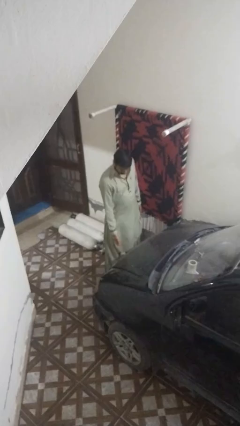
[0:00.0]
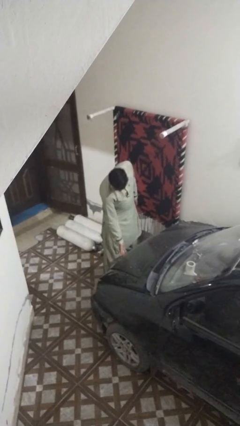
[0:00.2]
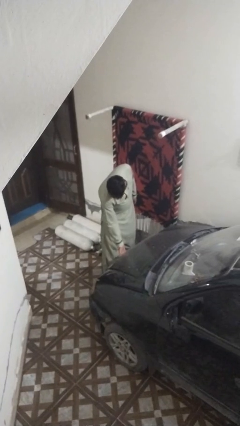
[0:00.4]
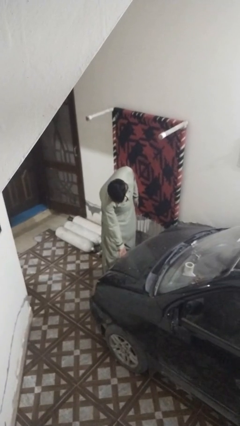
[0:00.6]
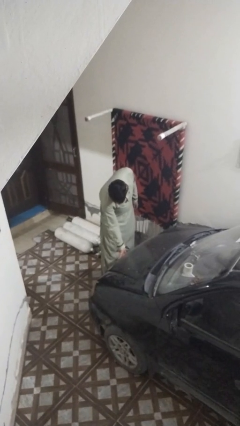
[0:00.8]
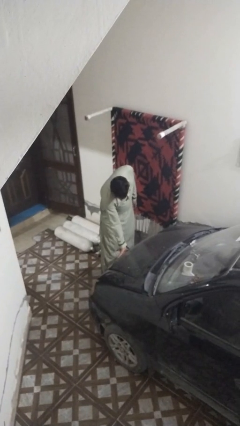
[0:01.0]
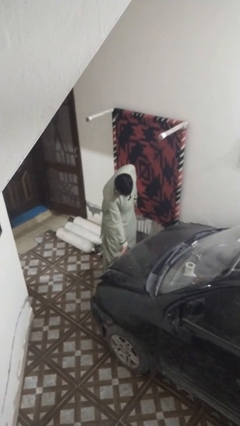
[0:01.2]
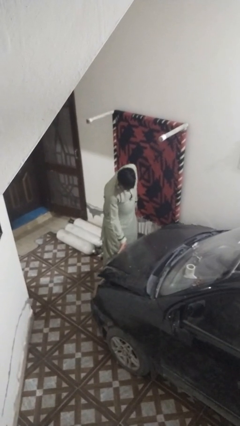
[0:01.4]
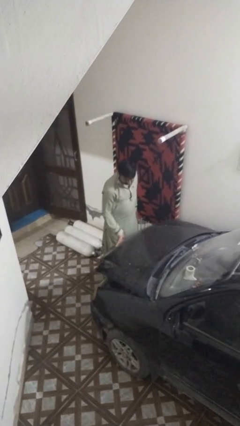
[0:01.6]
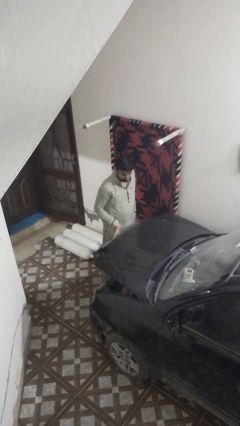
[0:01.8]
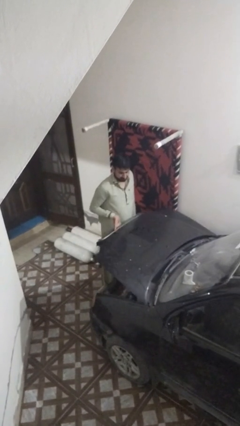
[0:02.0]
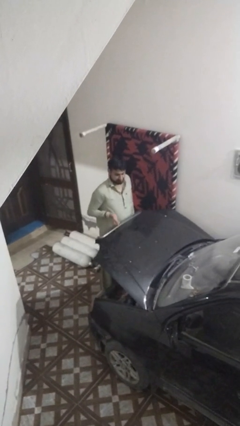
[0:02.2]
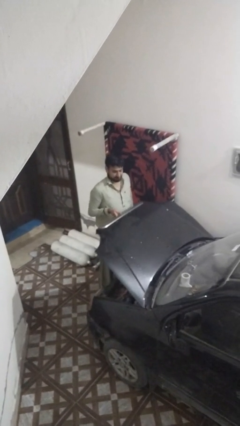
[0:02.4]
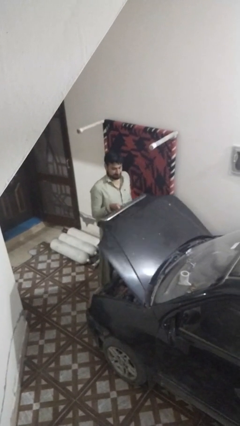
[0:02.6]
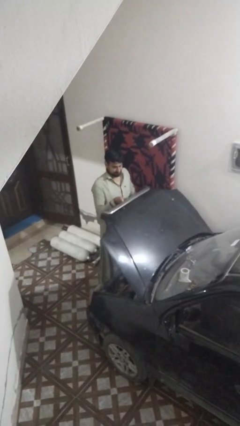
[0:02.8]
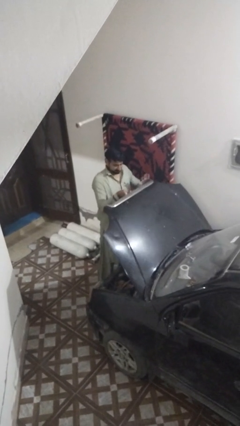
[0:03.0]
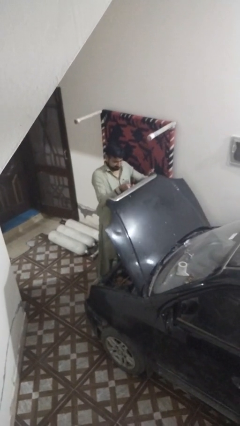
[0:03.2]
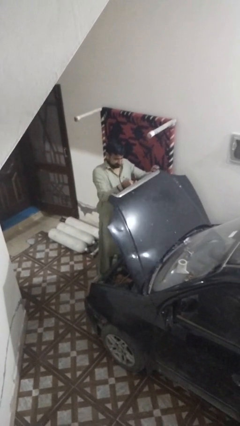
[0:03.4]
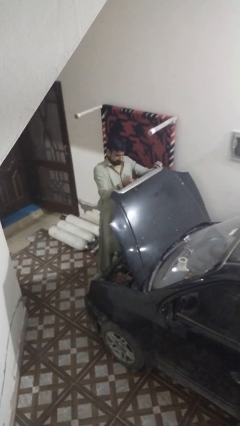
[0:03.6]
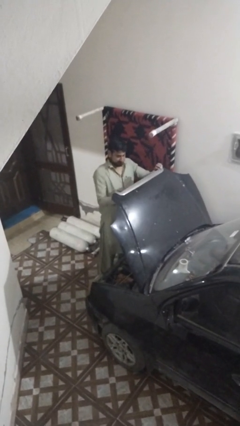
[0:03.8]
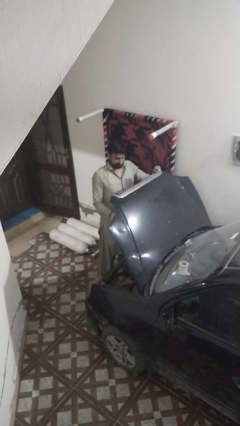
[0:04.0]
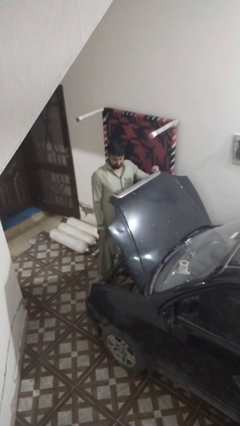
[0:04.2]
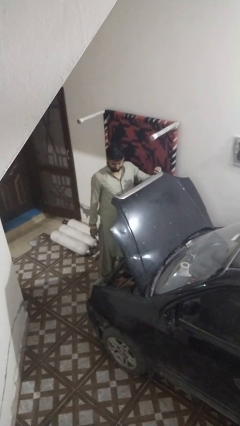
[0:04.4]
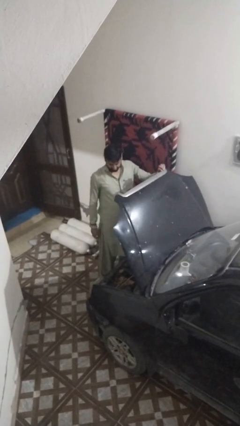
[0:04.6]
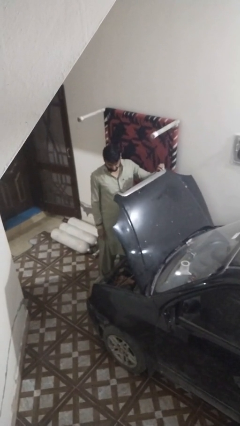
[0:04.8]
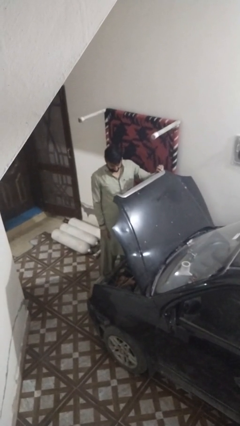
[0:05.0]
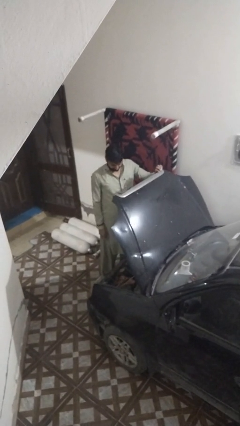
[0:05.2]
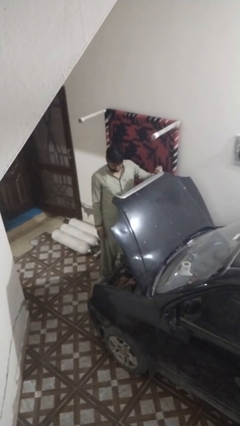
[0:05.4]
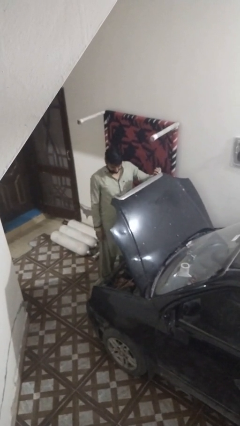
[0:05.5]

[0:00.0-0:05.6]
person opens car hood

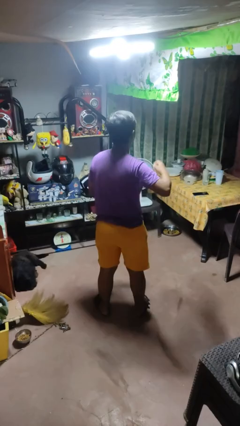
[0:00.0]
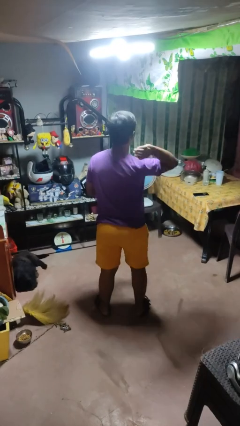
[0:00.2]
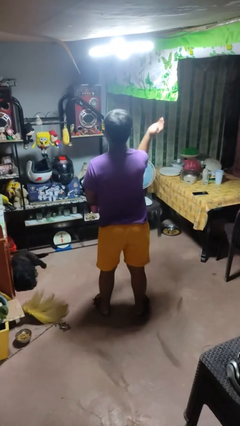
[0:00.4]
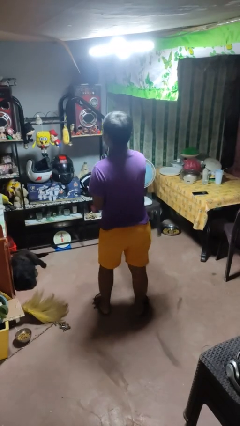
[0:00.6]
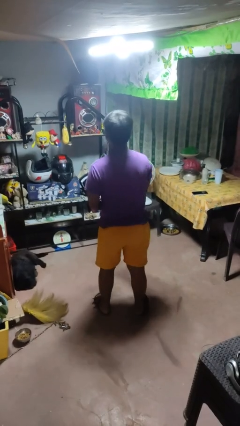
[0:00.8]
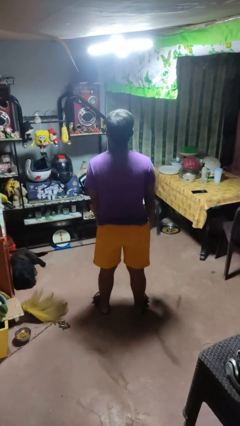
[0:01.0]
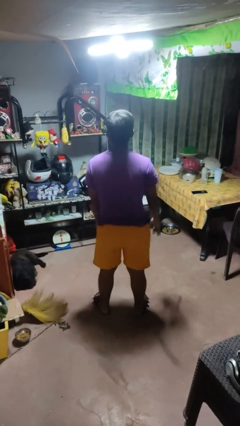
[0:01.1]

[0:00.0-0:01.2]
person karate chop

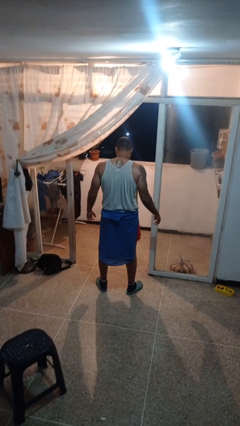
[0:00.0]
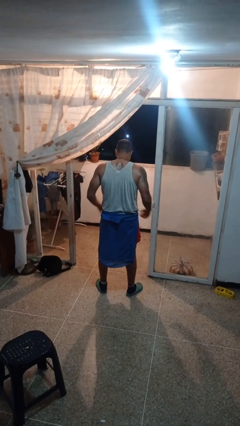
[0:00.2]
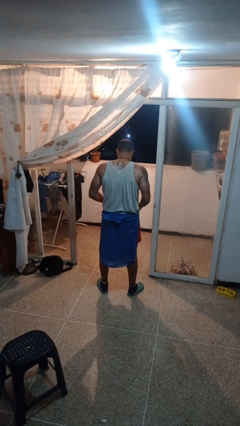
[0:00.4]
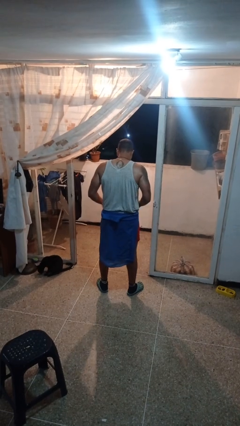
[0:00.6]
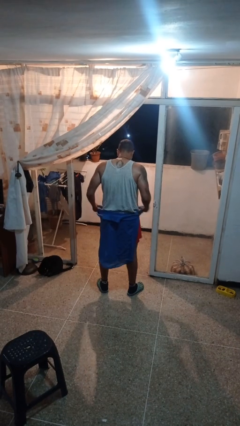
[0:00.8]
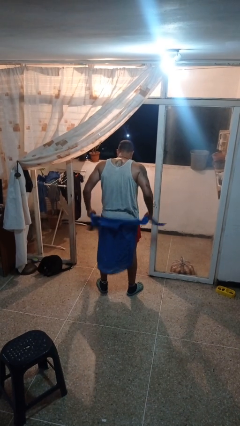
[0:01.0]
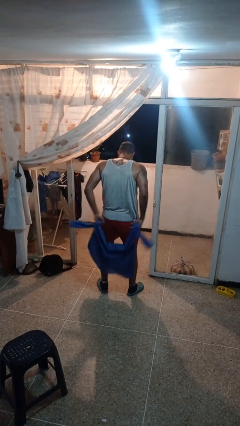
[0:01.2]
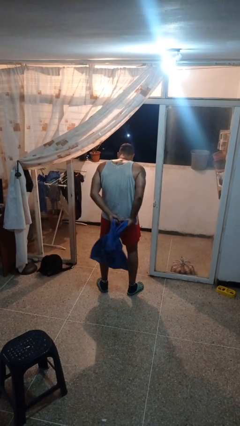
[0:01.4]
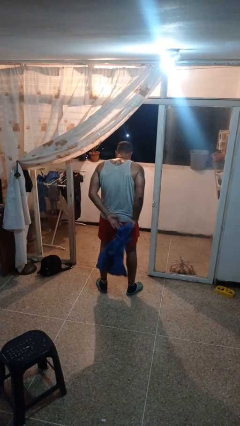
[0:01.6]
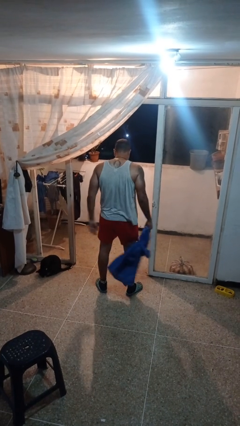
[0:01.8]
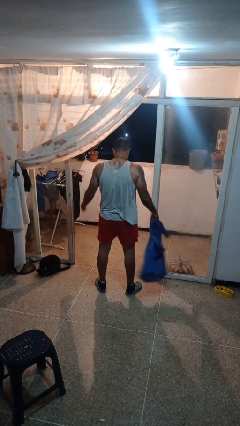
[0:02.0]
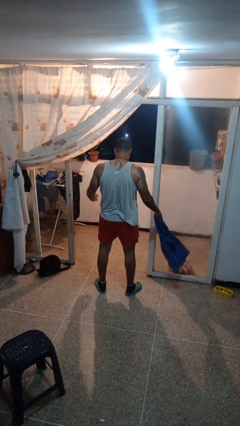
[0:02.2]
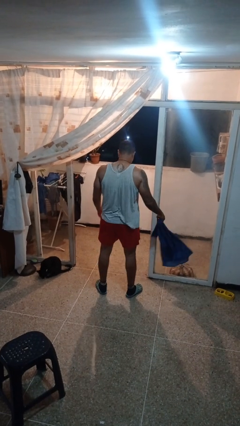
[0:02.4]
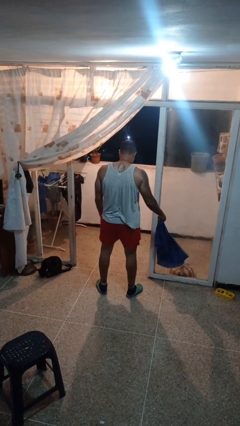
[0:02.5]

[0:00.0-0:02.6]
person unties jacket around waist

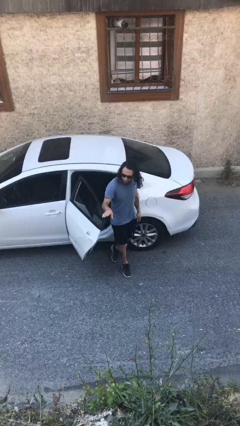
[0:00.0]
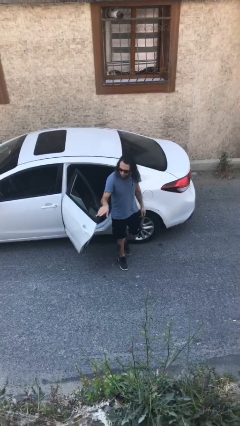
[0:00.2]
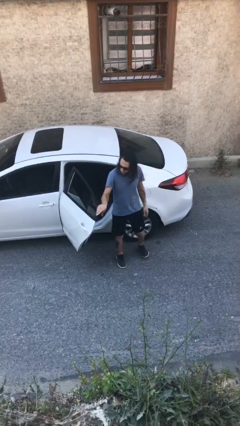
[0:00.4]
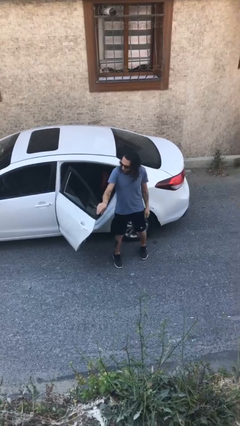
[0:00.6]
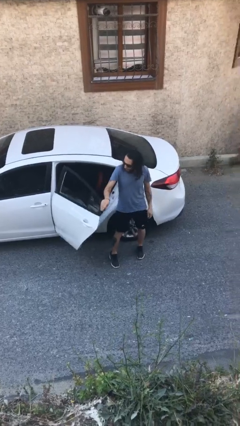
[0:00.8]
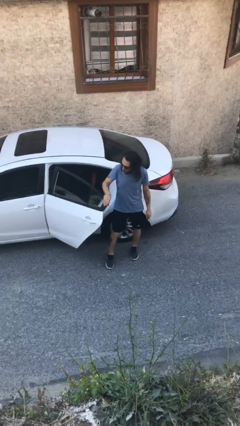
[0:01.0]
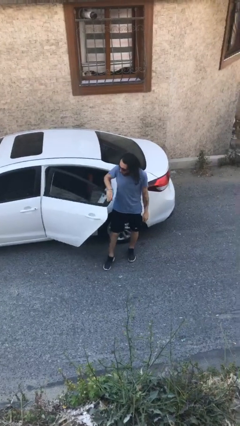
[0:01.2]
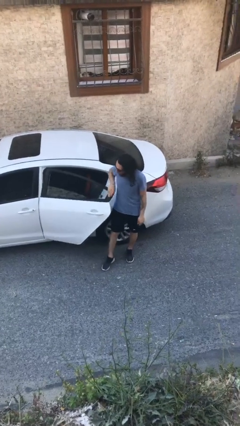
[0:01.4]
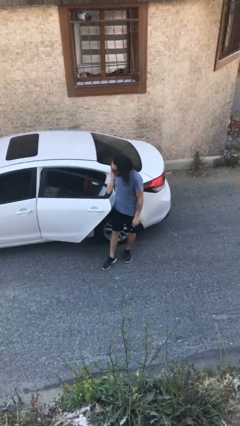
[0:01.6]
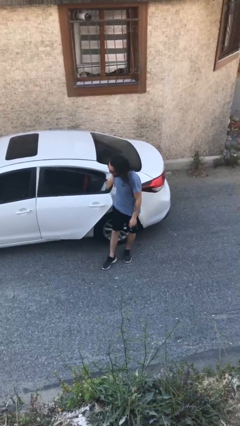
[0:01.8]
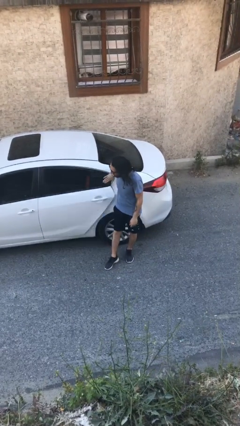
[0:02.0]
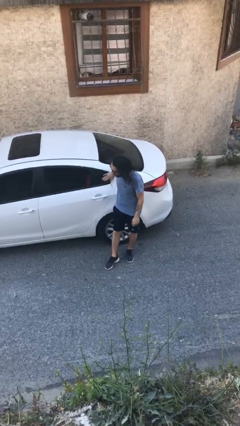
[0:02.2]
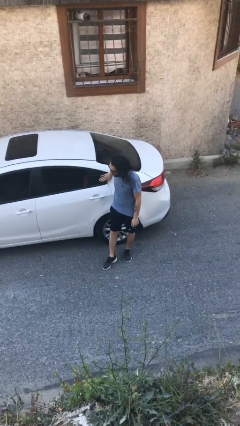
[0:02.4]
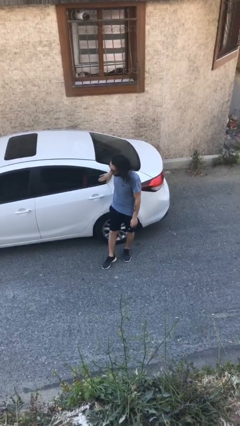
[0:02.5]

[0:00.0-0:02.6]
person closes car door

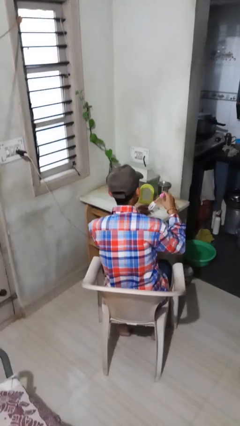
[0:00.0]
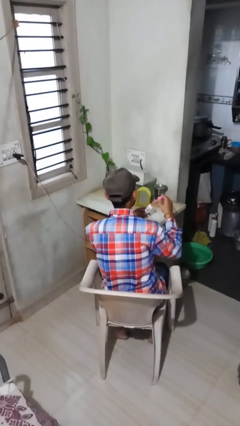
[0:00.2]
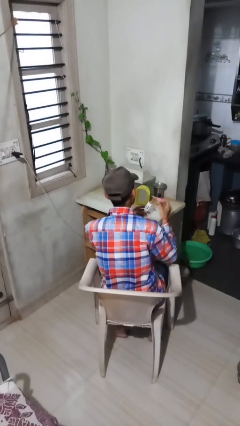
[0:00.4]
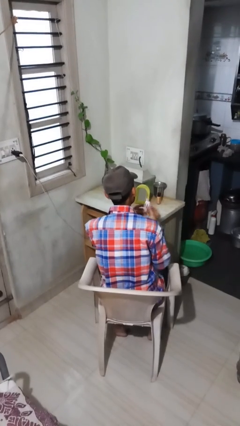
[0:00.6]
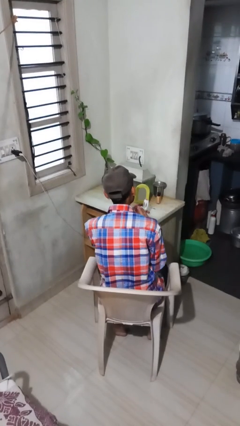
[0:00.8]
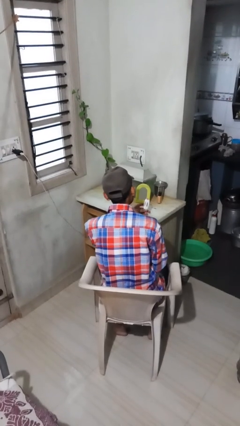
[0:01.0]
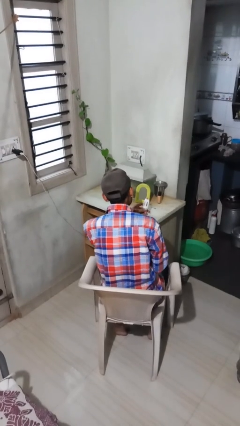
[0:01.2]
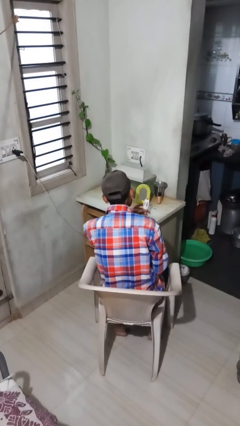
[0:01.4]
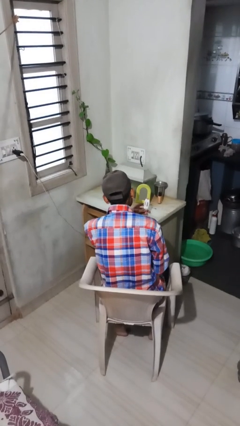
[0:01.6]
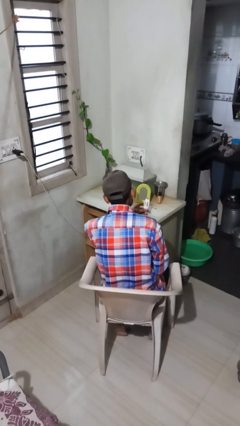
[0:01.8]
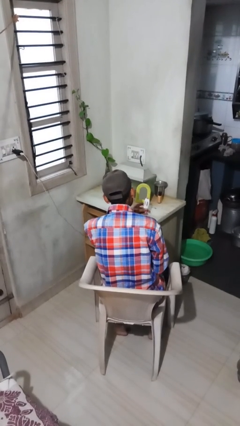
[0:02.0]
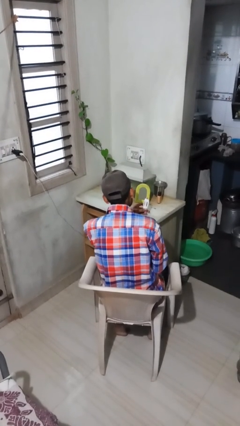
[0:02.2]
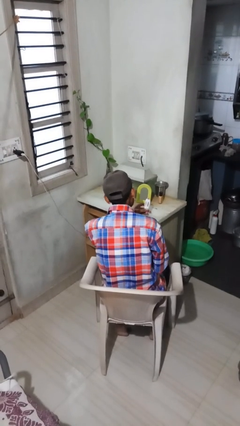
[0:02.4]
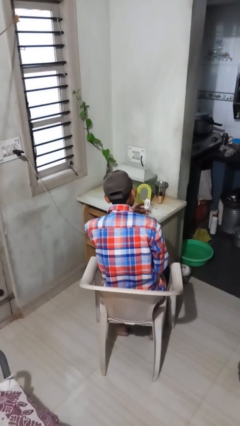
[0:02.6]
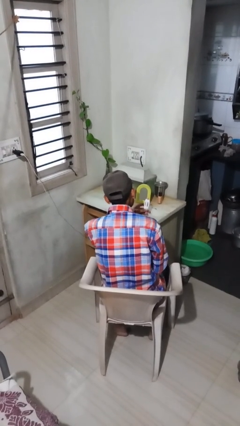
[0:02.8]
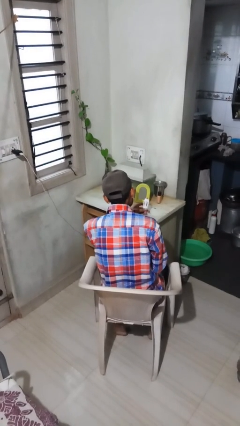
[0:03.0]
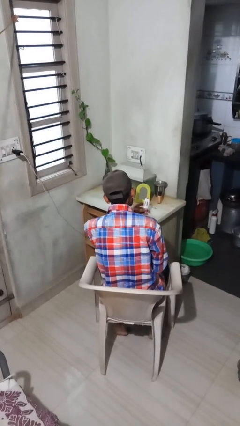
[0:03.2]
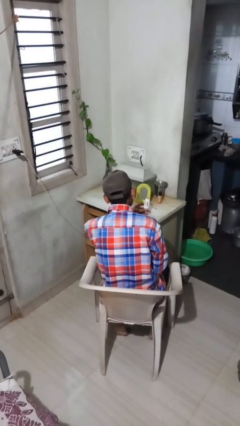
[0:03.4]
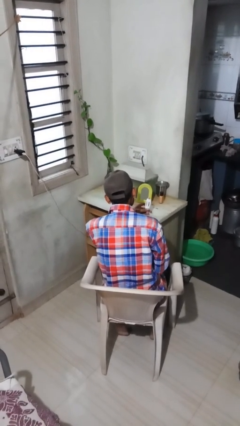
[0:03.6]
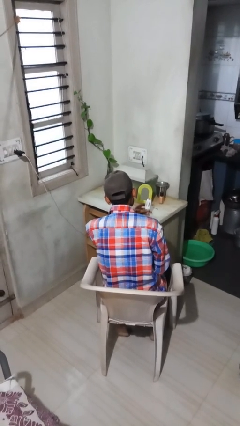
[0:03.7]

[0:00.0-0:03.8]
person applies lip makeup

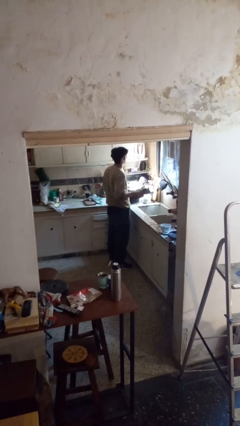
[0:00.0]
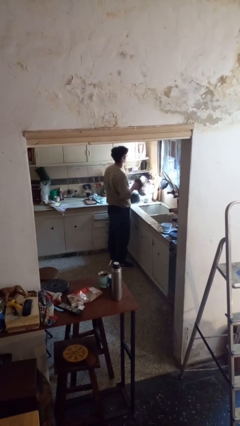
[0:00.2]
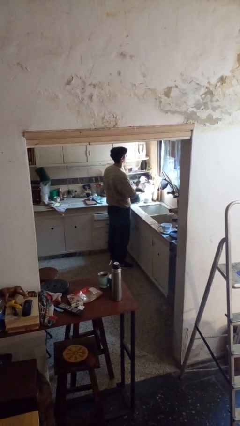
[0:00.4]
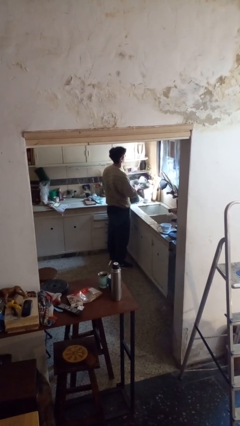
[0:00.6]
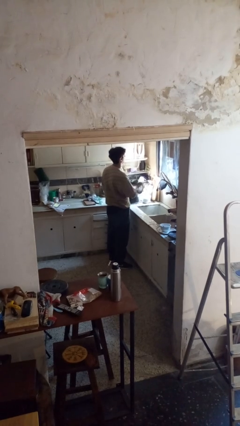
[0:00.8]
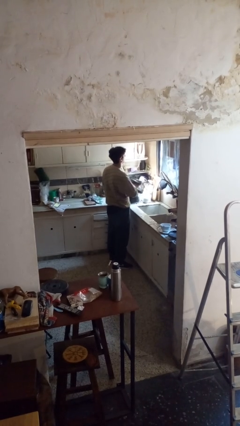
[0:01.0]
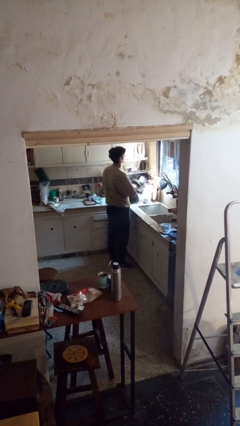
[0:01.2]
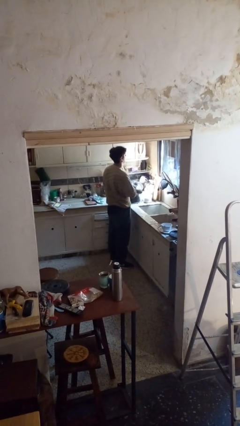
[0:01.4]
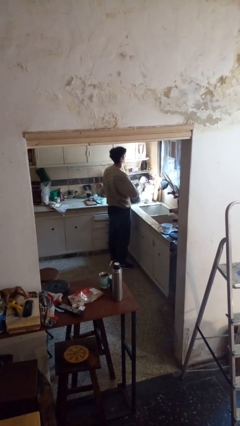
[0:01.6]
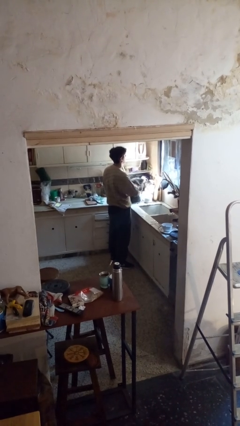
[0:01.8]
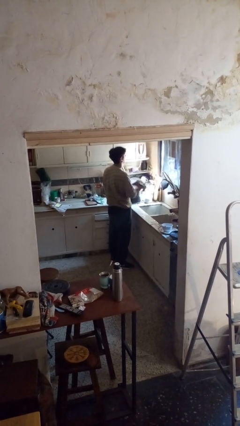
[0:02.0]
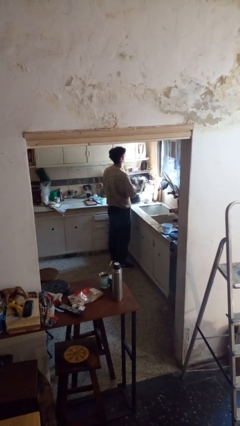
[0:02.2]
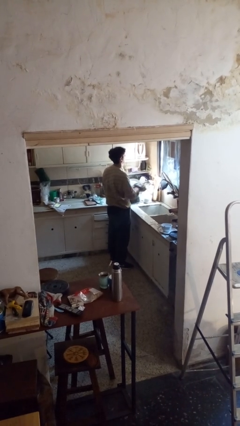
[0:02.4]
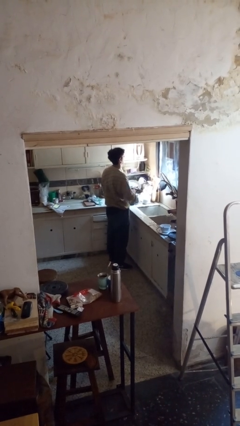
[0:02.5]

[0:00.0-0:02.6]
person dries dish
